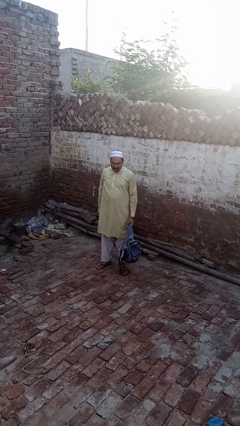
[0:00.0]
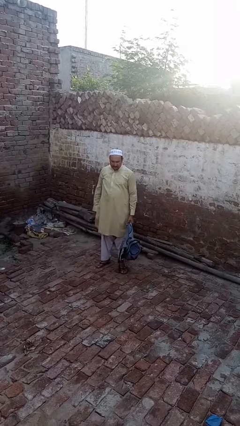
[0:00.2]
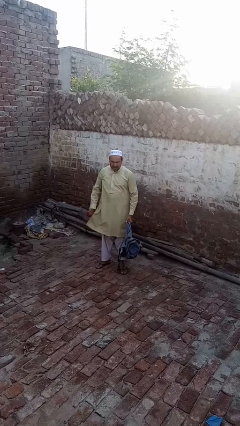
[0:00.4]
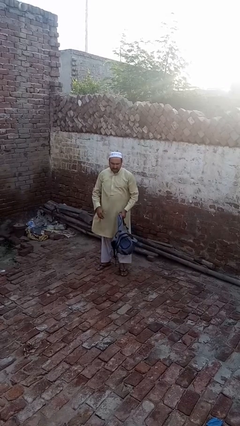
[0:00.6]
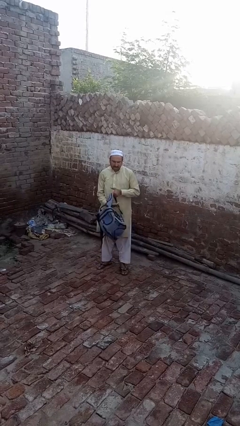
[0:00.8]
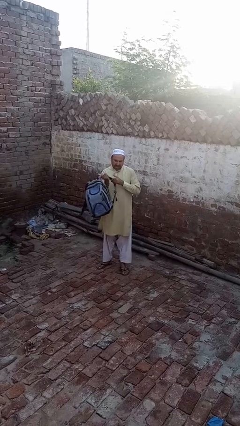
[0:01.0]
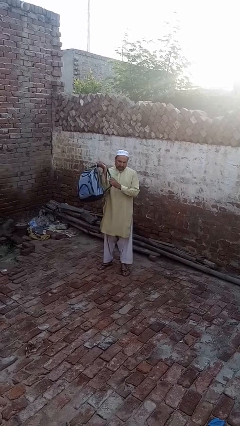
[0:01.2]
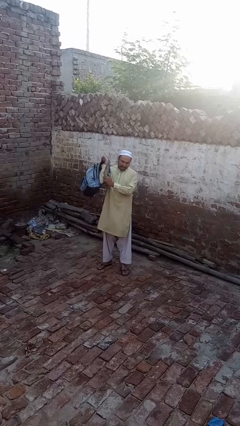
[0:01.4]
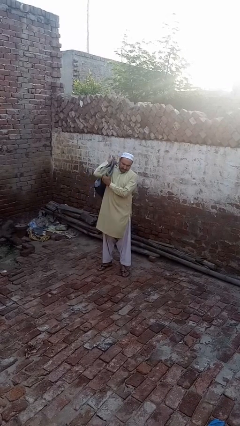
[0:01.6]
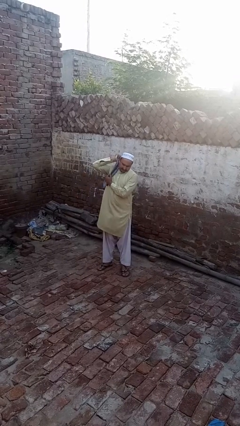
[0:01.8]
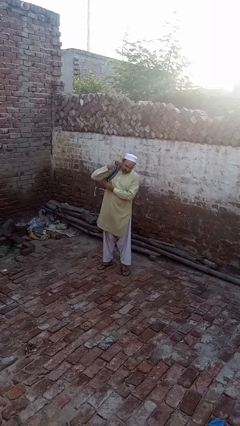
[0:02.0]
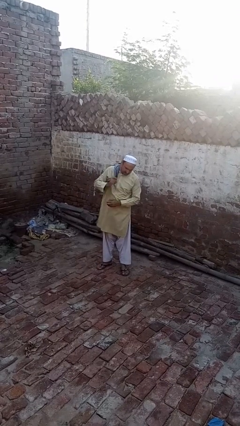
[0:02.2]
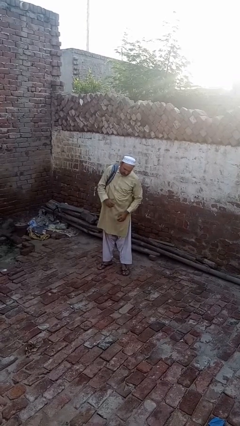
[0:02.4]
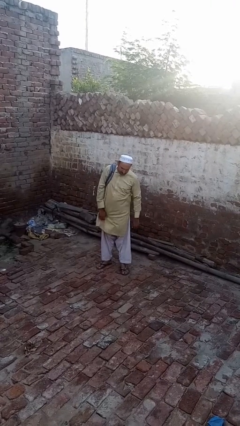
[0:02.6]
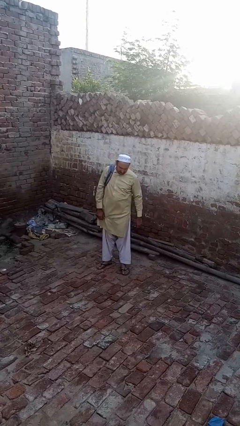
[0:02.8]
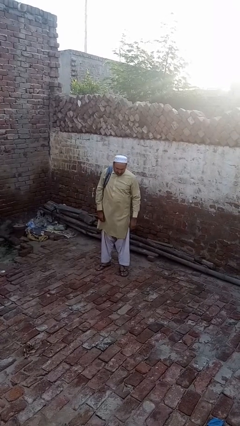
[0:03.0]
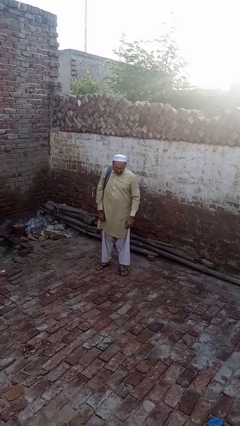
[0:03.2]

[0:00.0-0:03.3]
person puts on backpack

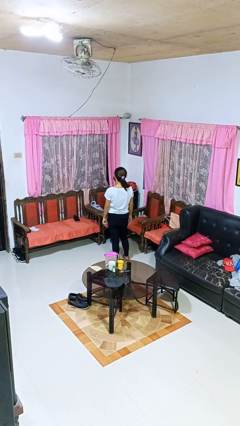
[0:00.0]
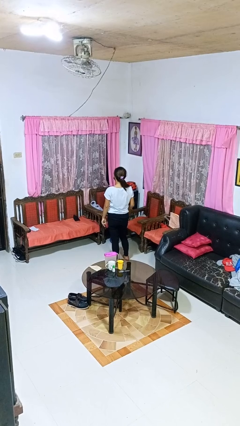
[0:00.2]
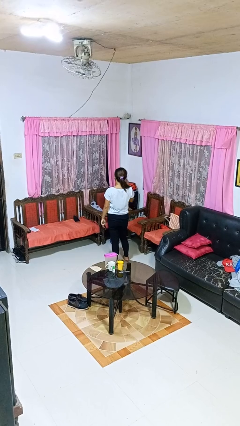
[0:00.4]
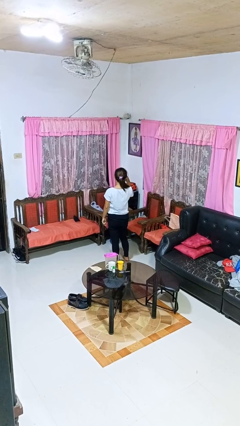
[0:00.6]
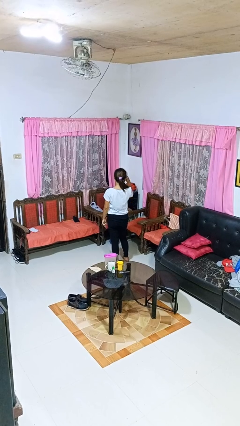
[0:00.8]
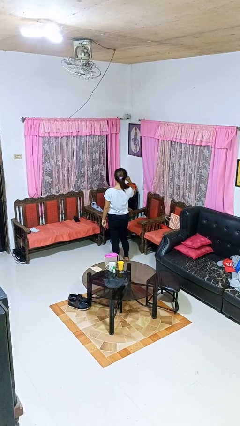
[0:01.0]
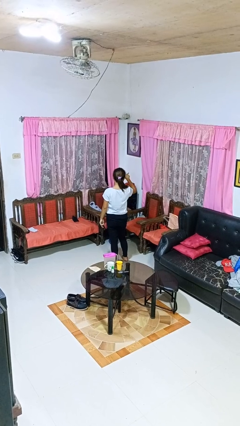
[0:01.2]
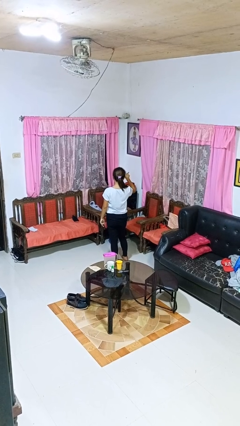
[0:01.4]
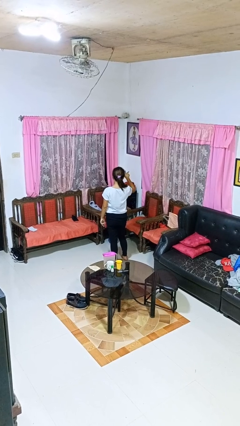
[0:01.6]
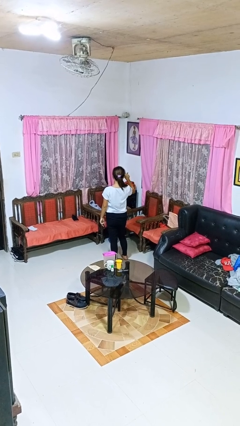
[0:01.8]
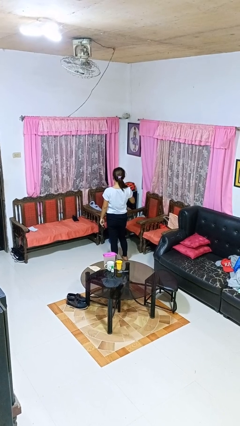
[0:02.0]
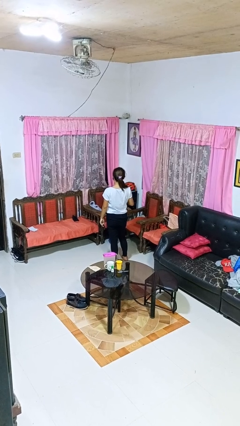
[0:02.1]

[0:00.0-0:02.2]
person gestures watch closely

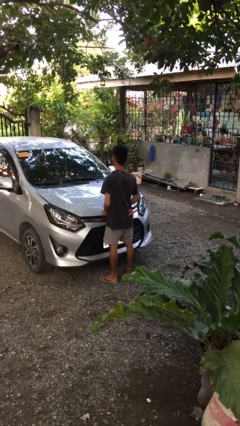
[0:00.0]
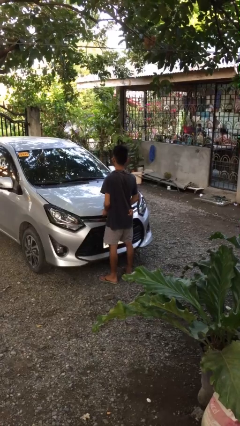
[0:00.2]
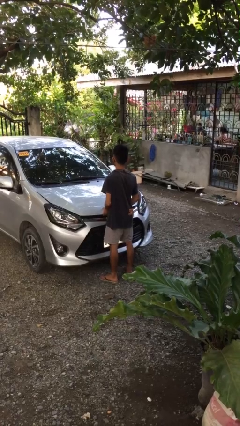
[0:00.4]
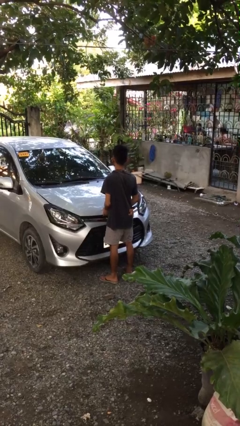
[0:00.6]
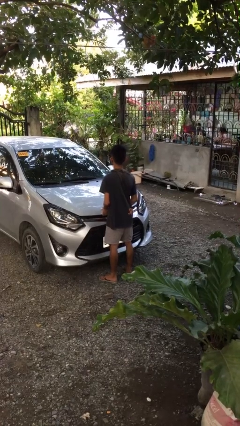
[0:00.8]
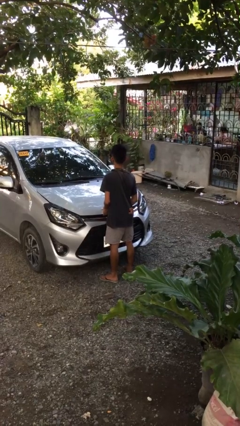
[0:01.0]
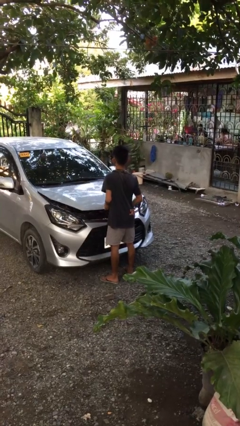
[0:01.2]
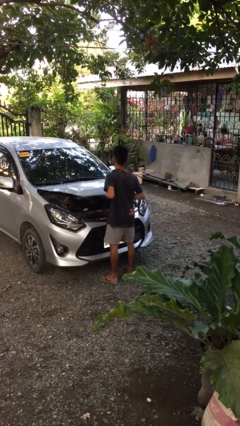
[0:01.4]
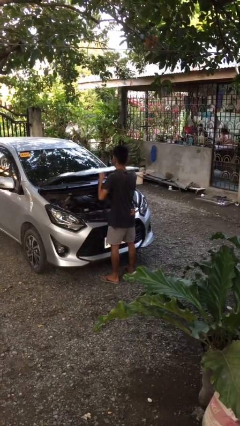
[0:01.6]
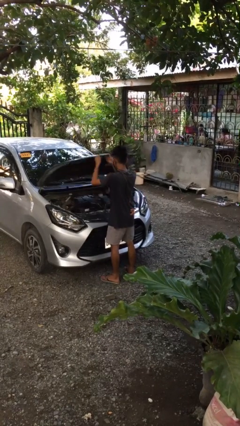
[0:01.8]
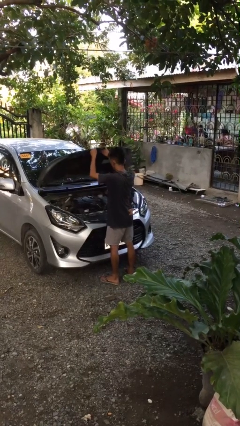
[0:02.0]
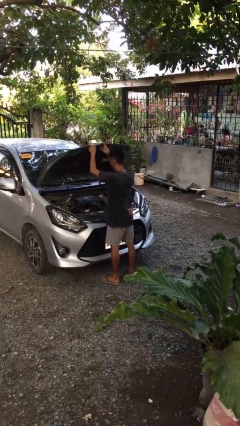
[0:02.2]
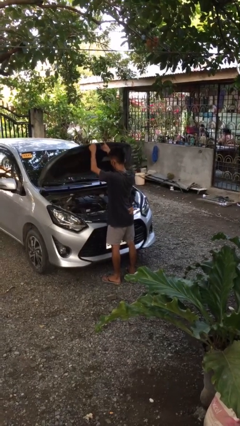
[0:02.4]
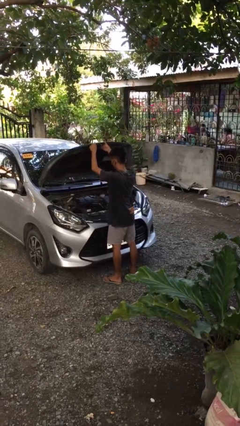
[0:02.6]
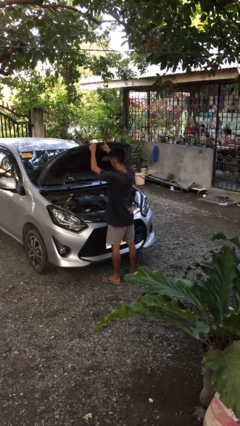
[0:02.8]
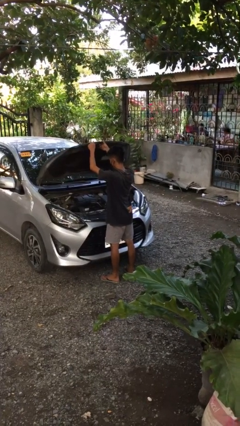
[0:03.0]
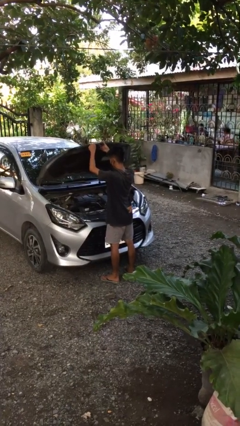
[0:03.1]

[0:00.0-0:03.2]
person opens car hood

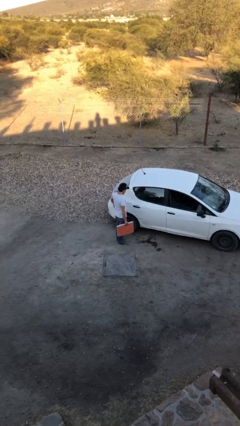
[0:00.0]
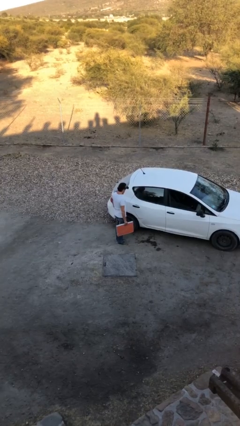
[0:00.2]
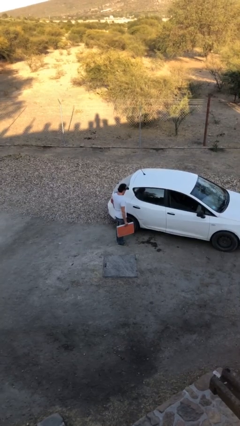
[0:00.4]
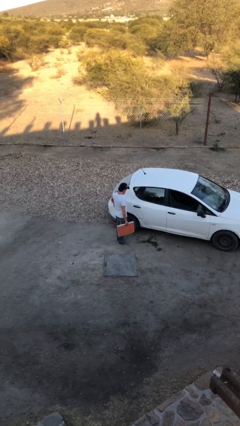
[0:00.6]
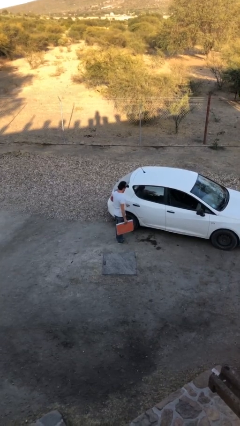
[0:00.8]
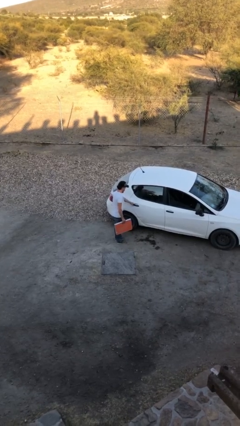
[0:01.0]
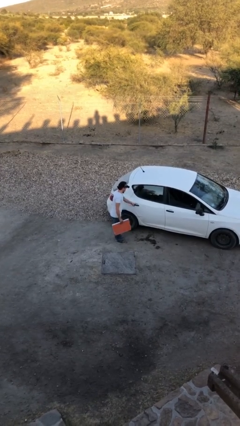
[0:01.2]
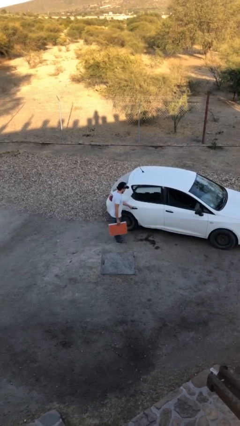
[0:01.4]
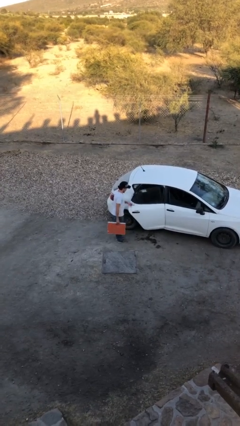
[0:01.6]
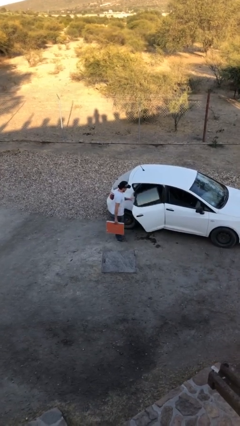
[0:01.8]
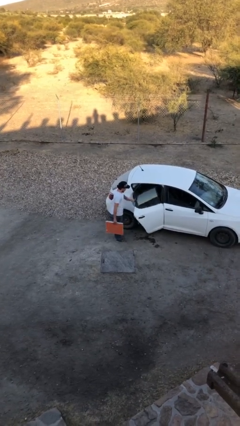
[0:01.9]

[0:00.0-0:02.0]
person opens car door

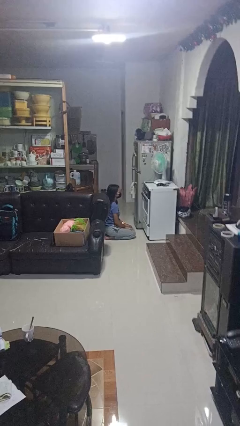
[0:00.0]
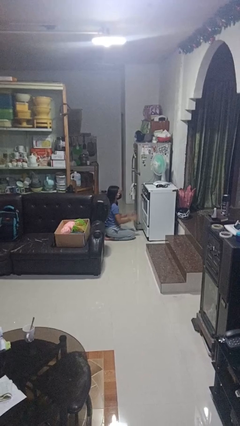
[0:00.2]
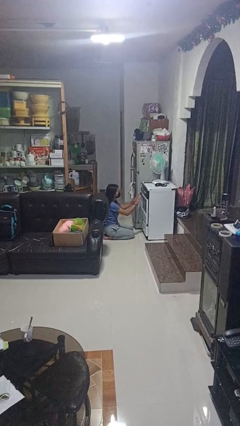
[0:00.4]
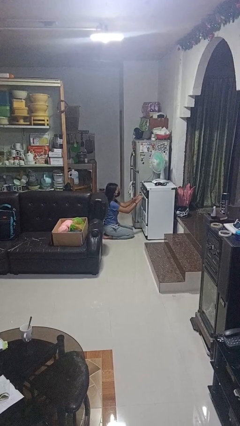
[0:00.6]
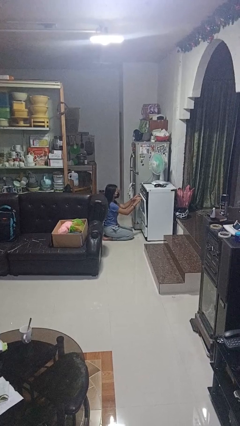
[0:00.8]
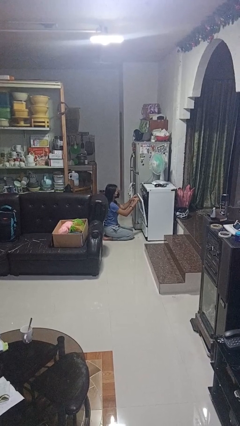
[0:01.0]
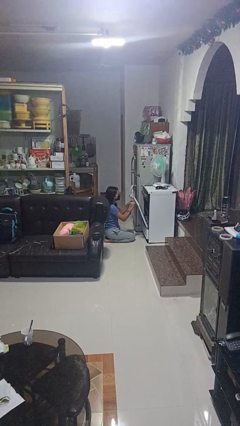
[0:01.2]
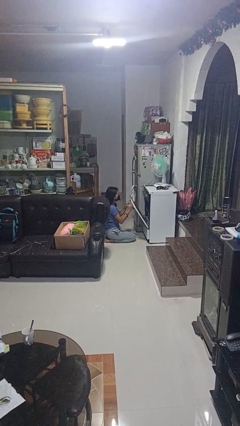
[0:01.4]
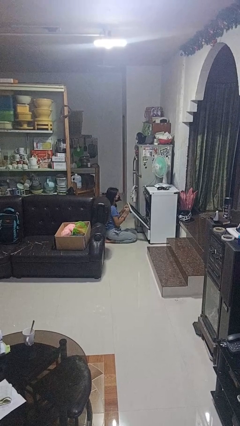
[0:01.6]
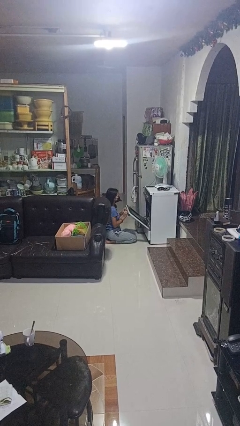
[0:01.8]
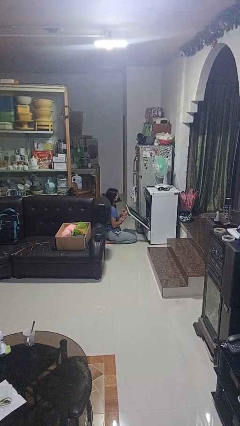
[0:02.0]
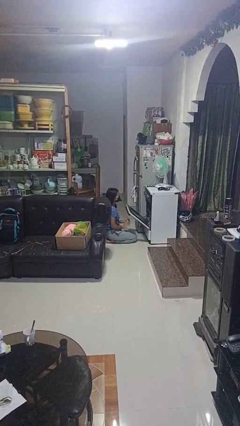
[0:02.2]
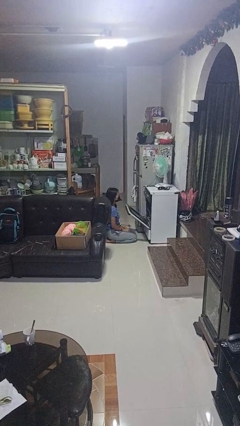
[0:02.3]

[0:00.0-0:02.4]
person opens oven door

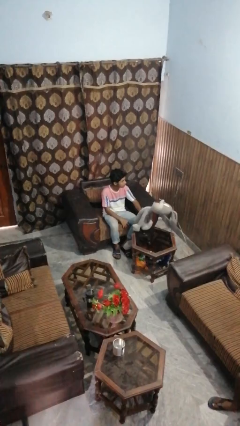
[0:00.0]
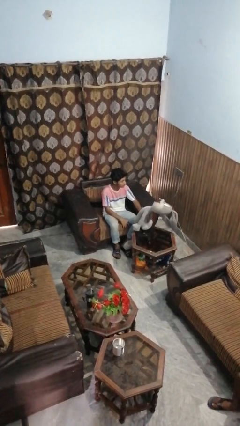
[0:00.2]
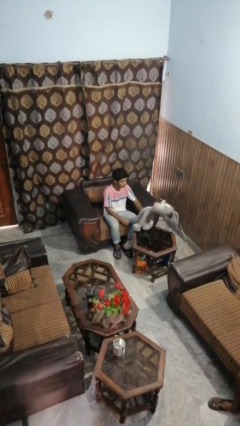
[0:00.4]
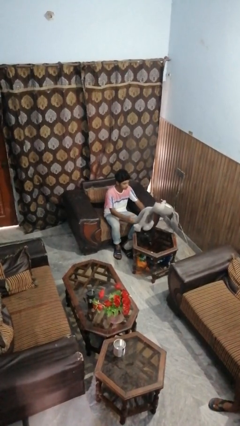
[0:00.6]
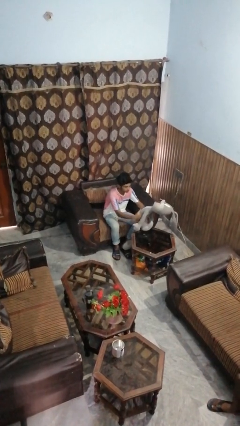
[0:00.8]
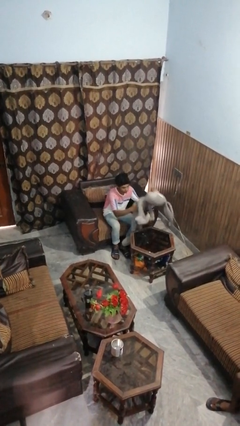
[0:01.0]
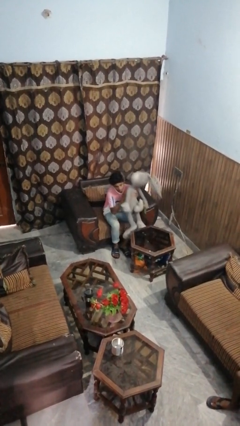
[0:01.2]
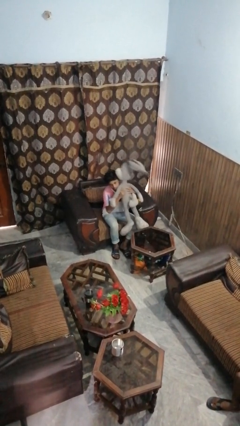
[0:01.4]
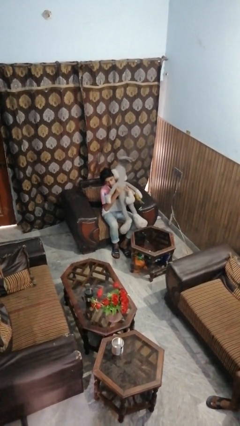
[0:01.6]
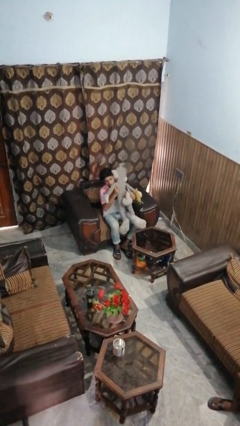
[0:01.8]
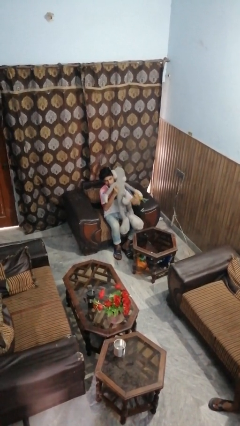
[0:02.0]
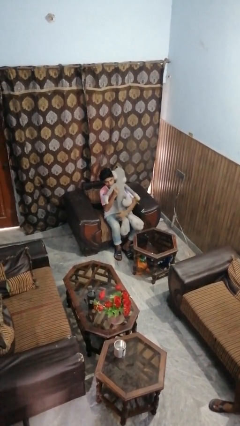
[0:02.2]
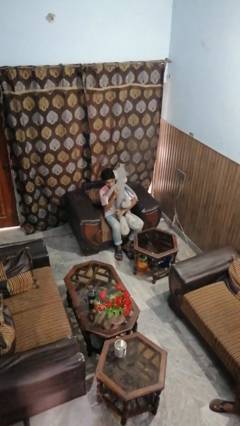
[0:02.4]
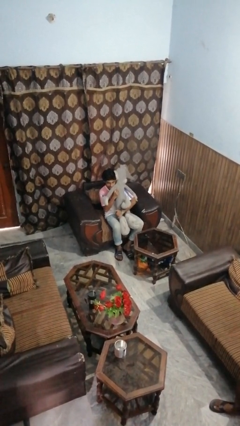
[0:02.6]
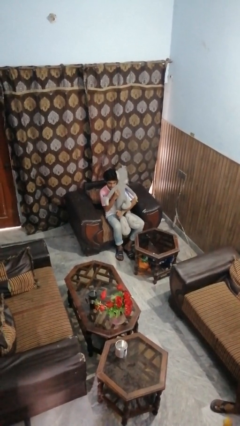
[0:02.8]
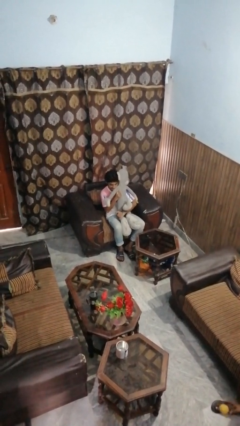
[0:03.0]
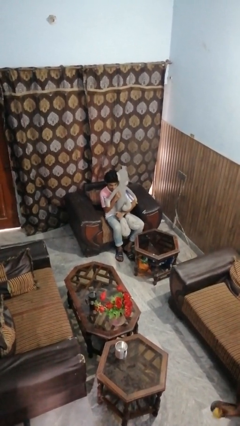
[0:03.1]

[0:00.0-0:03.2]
person hugs stuffed animal

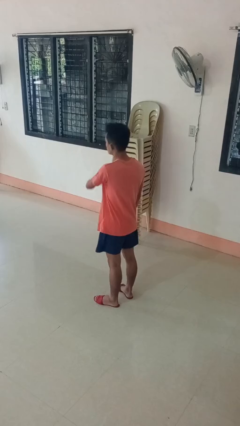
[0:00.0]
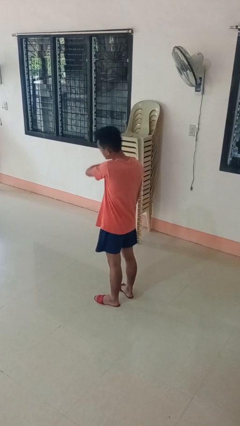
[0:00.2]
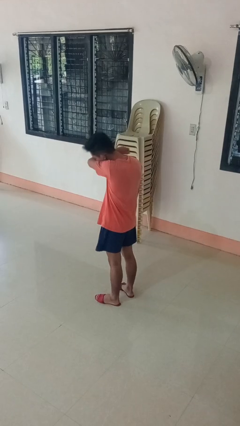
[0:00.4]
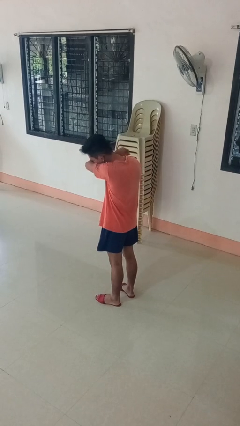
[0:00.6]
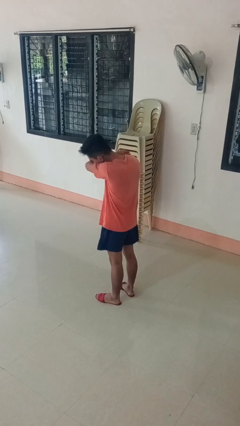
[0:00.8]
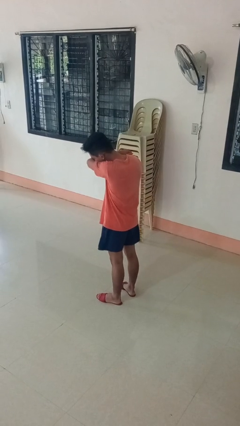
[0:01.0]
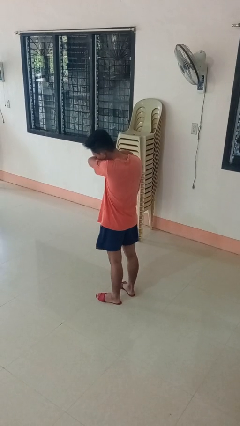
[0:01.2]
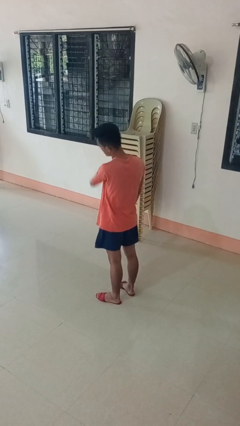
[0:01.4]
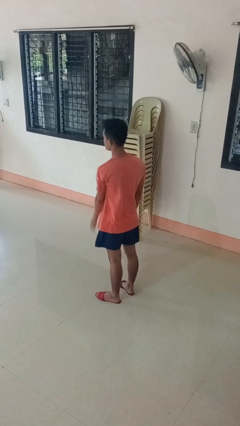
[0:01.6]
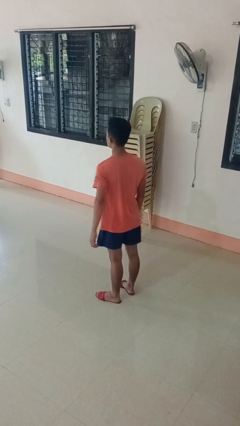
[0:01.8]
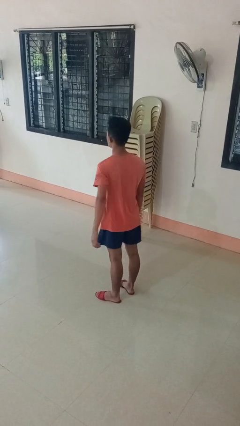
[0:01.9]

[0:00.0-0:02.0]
person sneezes into arm
